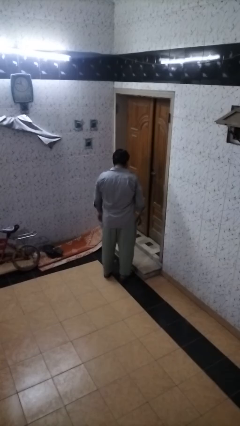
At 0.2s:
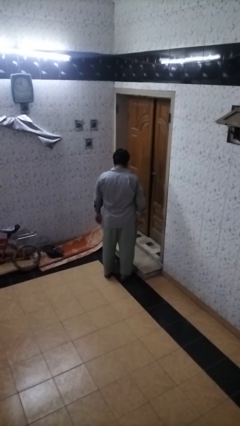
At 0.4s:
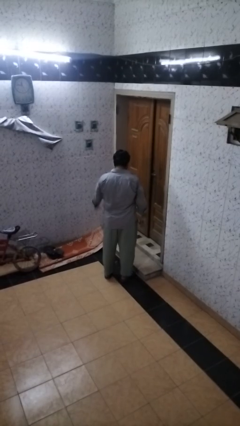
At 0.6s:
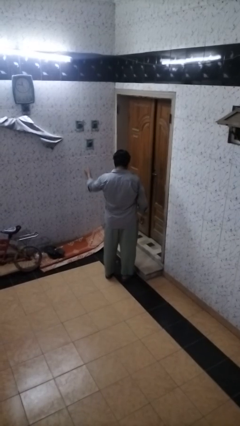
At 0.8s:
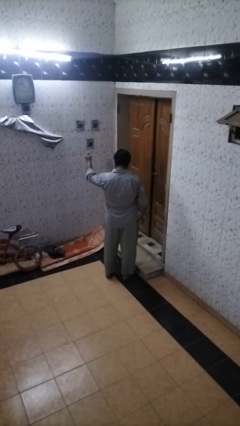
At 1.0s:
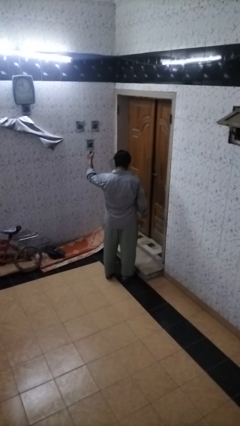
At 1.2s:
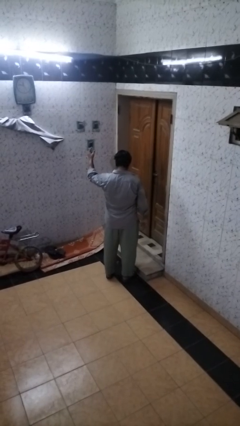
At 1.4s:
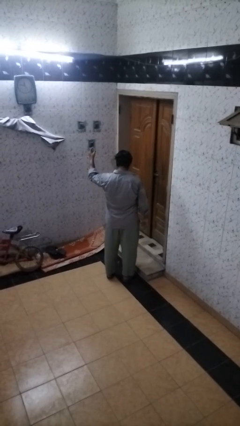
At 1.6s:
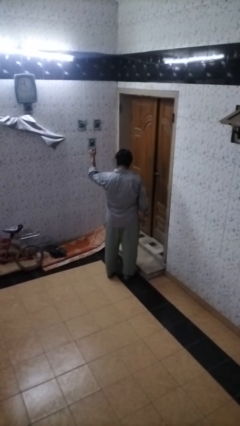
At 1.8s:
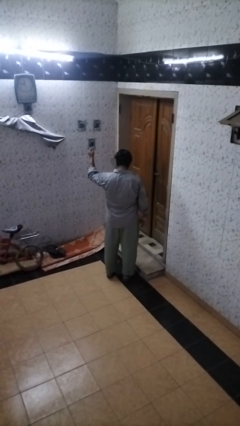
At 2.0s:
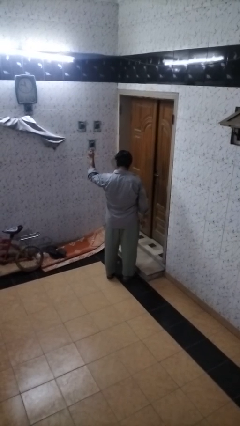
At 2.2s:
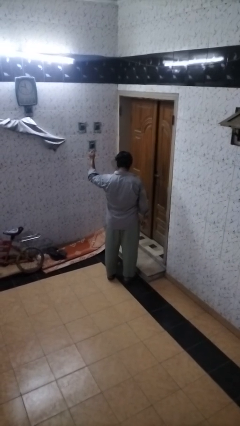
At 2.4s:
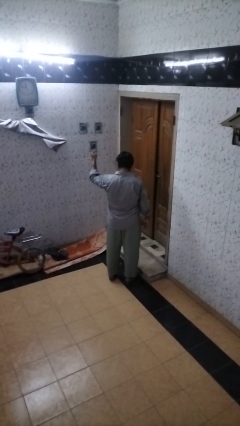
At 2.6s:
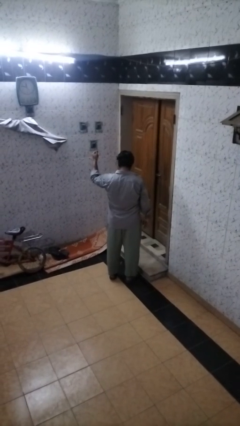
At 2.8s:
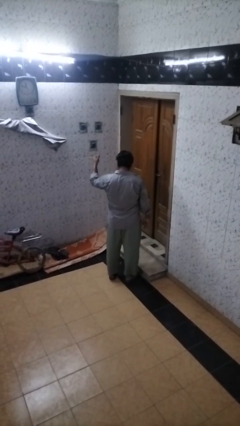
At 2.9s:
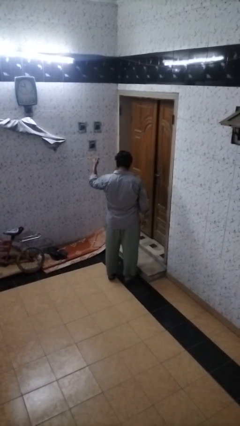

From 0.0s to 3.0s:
person snaps fingers

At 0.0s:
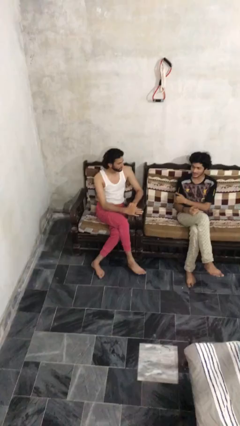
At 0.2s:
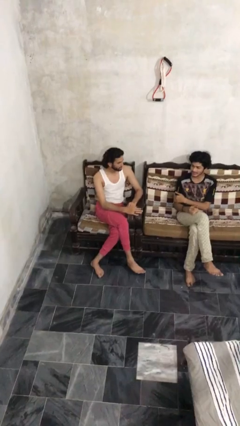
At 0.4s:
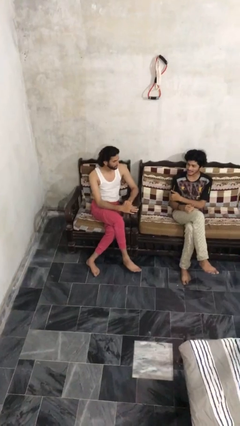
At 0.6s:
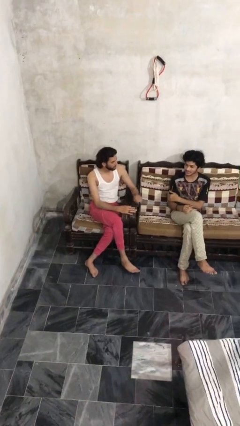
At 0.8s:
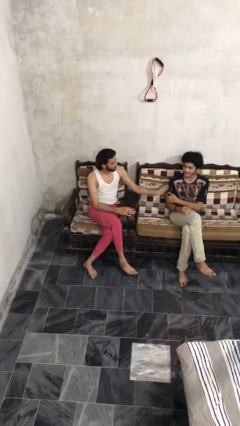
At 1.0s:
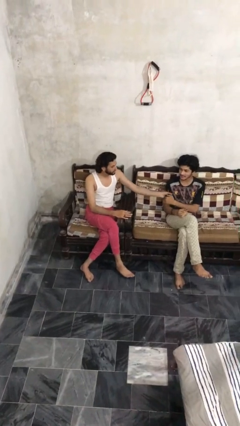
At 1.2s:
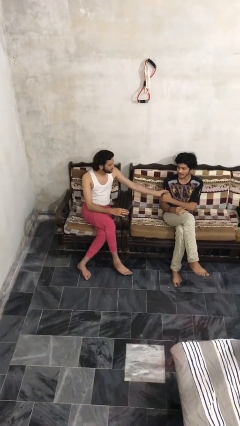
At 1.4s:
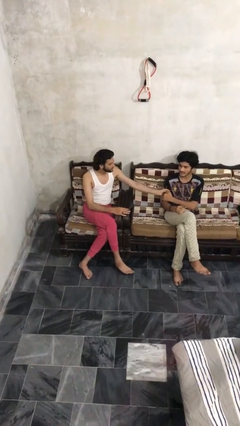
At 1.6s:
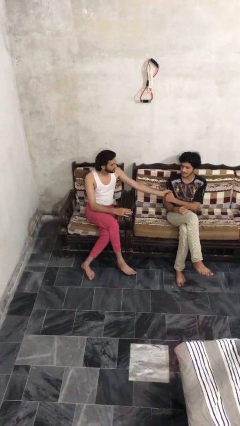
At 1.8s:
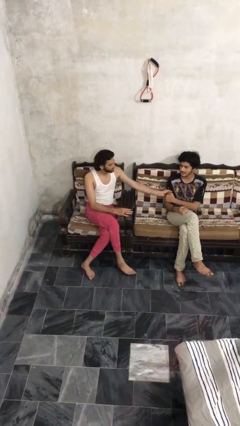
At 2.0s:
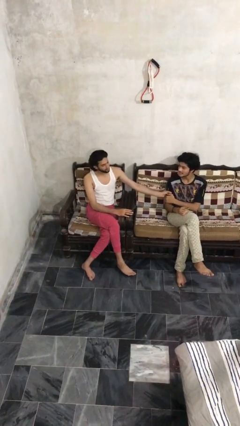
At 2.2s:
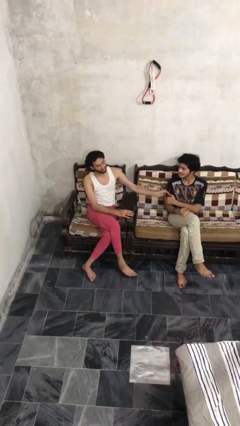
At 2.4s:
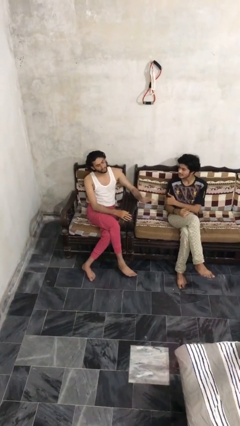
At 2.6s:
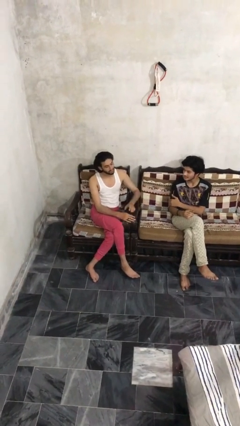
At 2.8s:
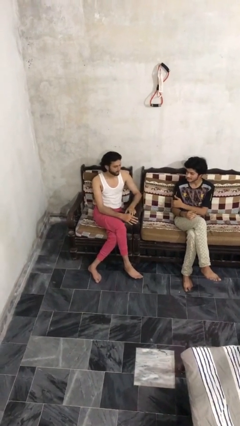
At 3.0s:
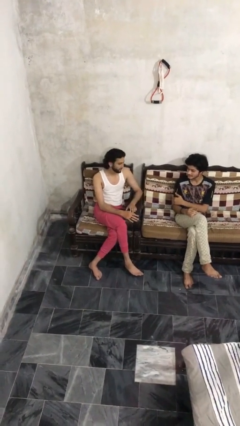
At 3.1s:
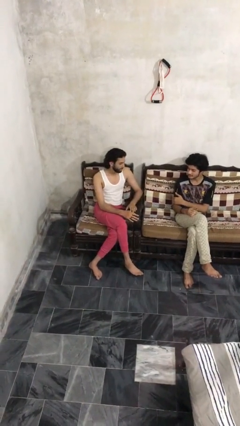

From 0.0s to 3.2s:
person grabs person by bicep

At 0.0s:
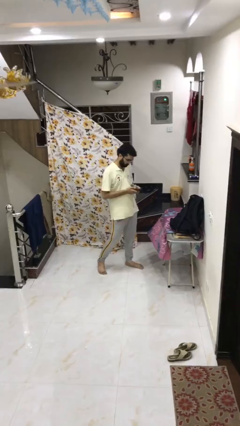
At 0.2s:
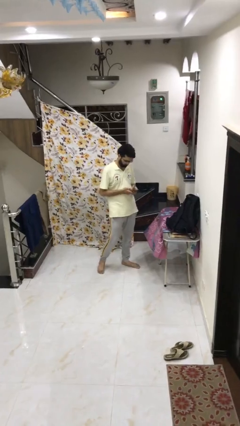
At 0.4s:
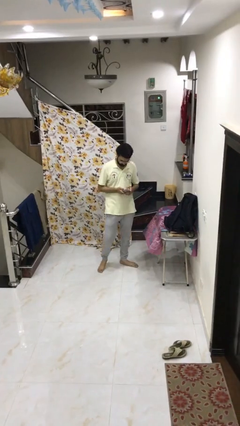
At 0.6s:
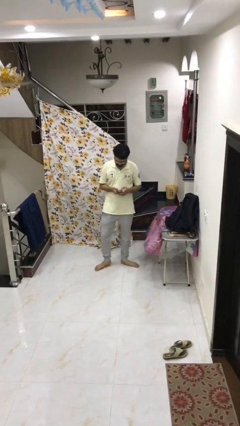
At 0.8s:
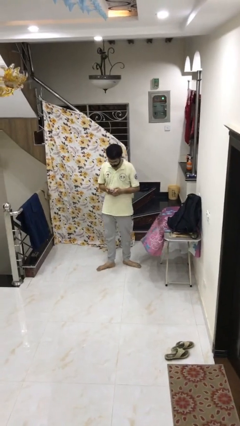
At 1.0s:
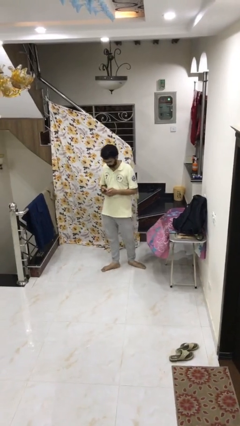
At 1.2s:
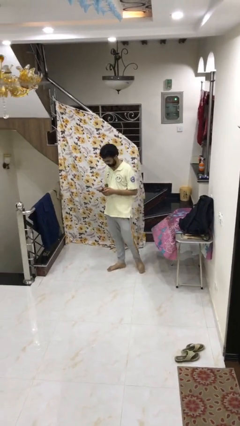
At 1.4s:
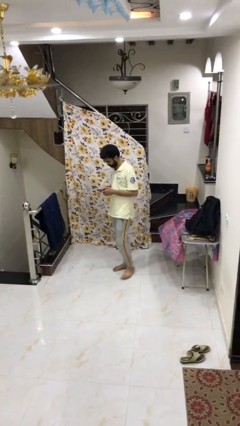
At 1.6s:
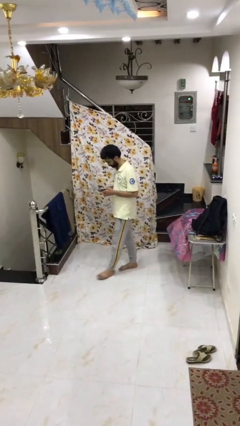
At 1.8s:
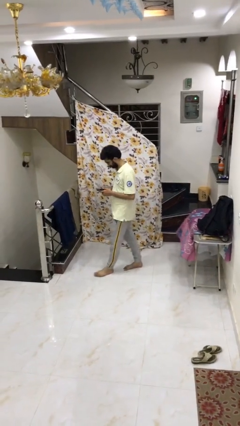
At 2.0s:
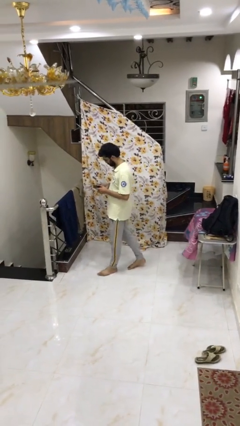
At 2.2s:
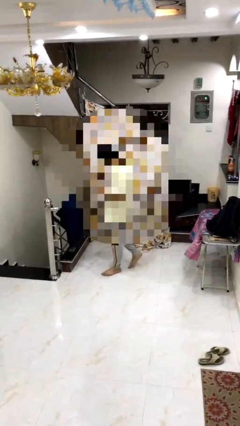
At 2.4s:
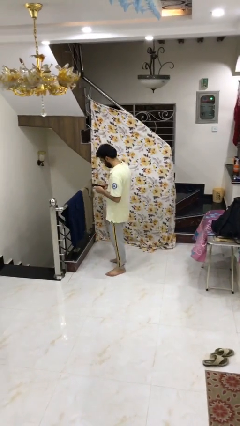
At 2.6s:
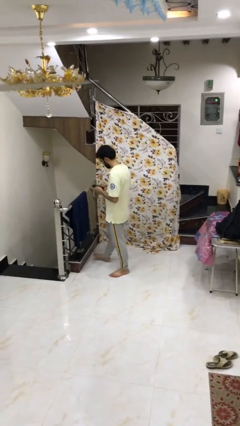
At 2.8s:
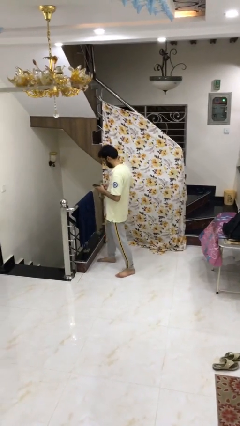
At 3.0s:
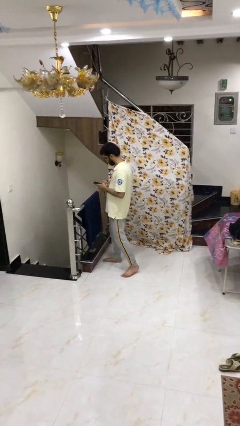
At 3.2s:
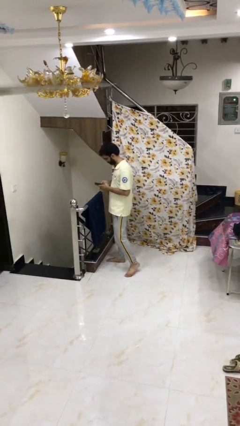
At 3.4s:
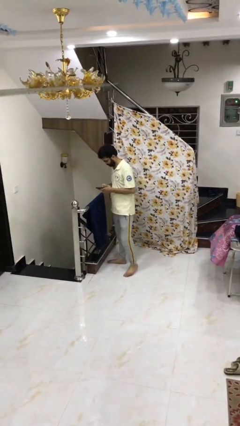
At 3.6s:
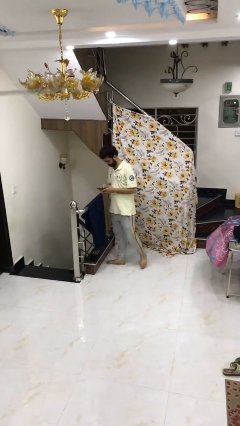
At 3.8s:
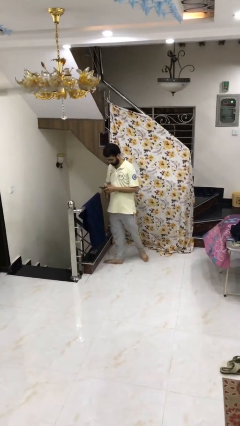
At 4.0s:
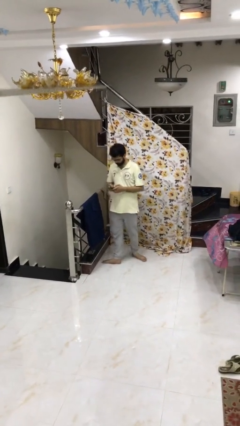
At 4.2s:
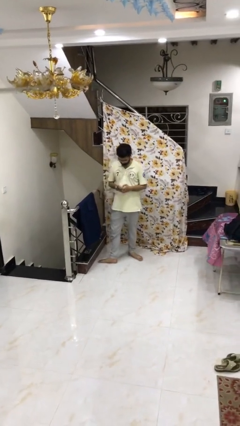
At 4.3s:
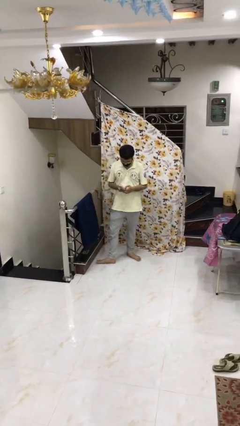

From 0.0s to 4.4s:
person texts on phone

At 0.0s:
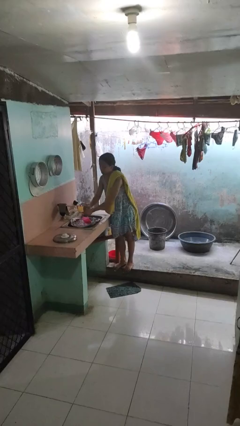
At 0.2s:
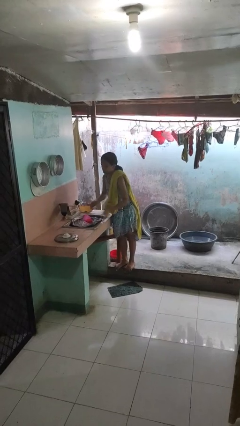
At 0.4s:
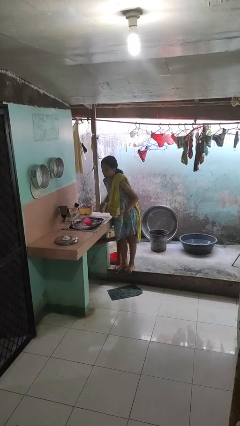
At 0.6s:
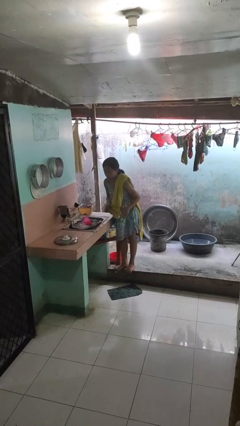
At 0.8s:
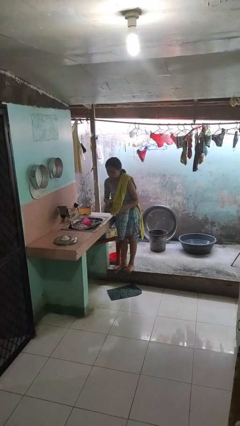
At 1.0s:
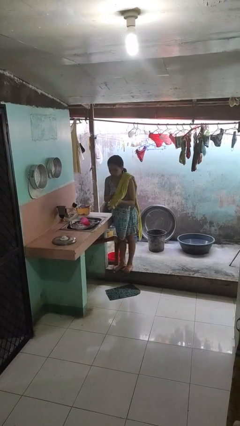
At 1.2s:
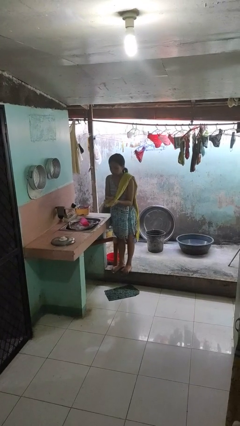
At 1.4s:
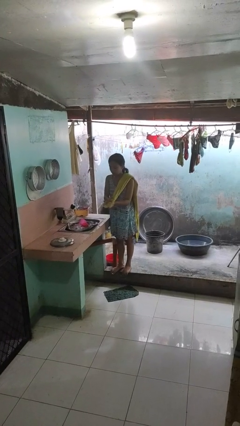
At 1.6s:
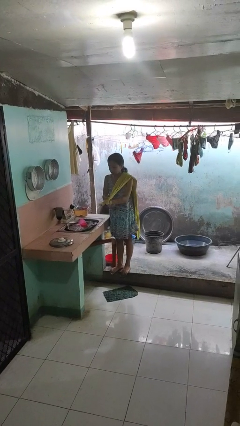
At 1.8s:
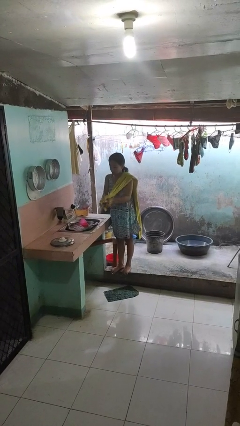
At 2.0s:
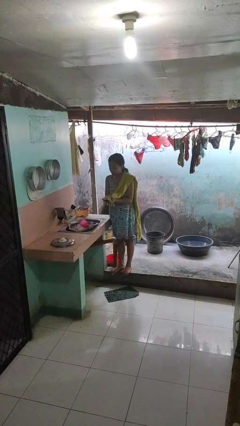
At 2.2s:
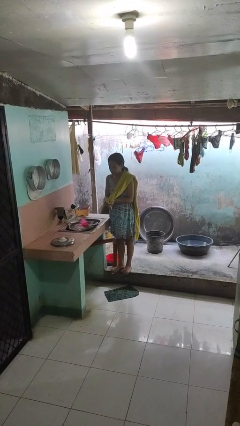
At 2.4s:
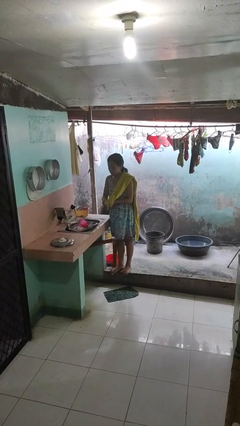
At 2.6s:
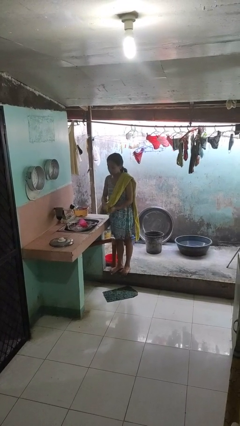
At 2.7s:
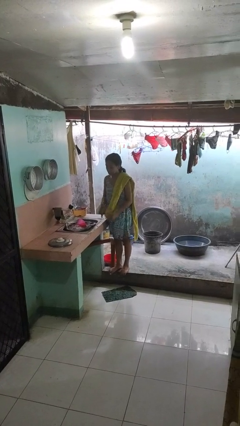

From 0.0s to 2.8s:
person dries hands with towel

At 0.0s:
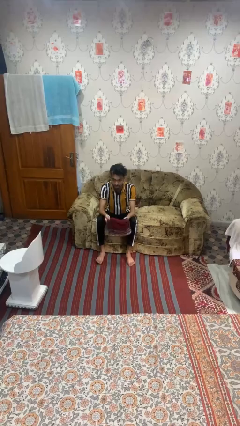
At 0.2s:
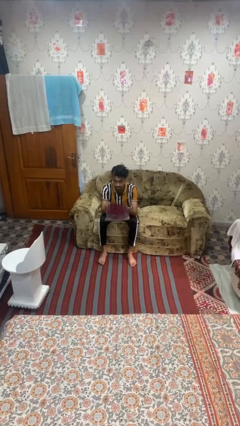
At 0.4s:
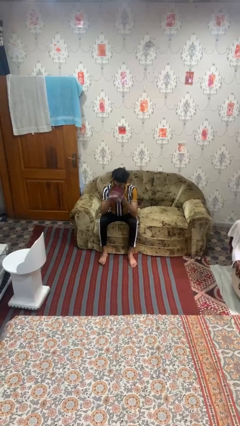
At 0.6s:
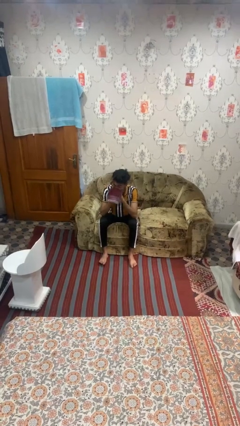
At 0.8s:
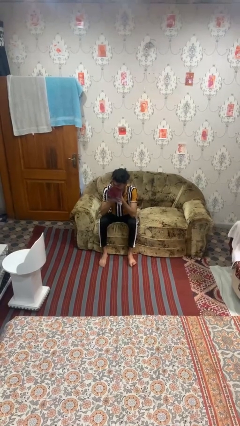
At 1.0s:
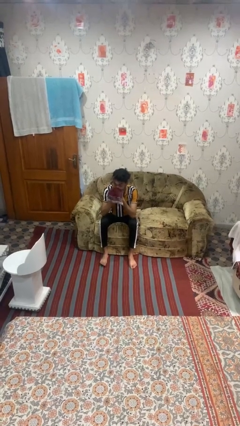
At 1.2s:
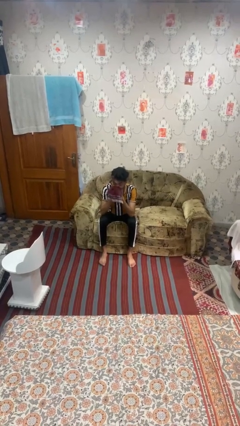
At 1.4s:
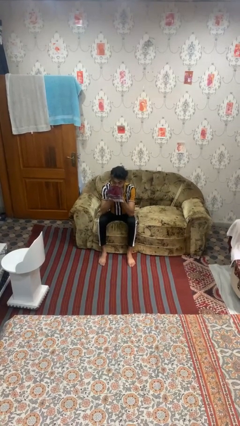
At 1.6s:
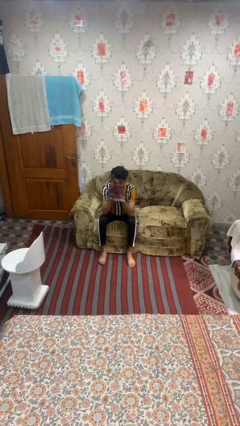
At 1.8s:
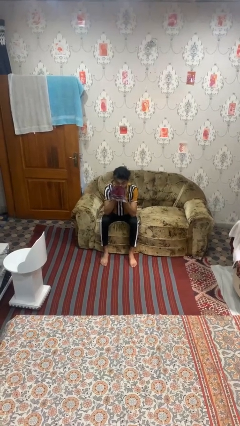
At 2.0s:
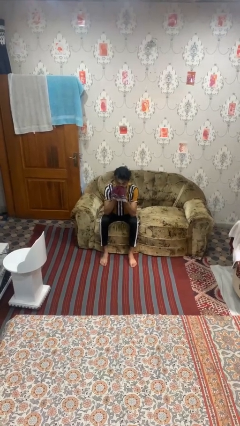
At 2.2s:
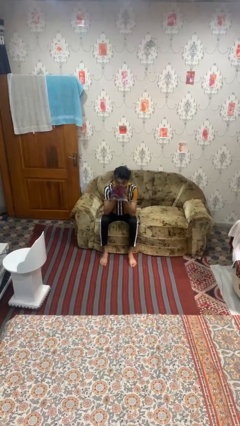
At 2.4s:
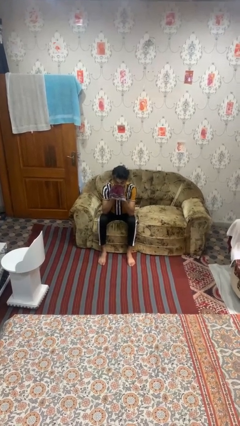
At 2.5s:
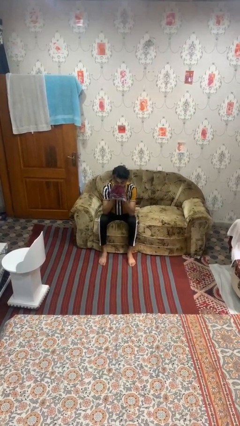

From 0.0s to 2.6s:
person blows nose

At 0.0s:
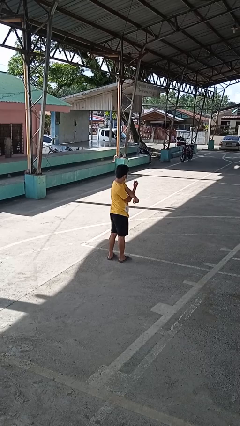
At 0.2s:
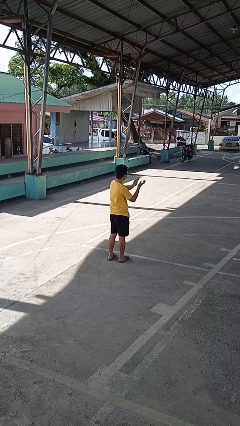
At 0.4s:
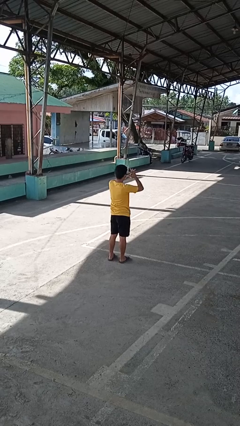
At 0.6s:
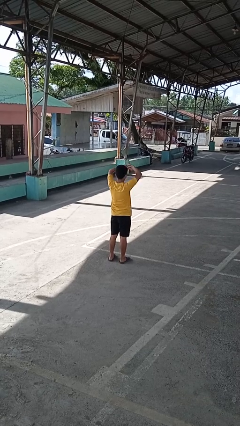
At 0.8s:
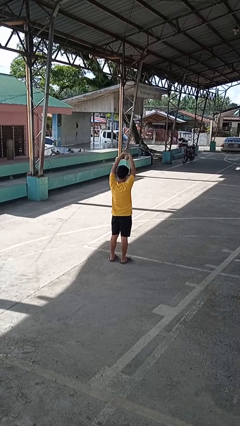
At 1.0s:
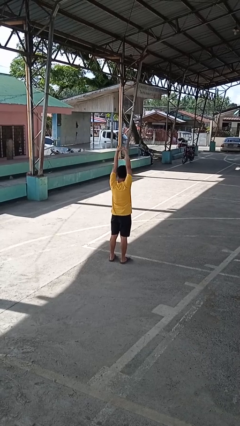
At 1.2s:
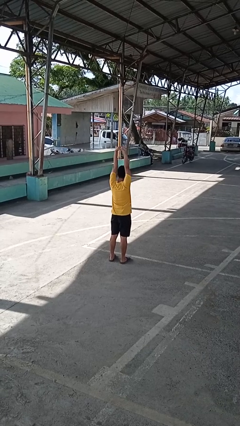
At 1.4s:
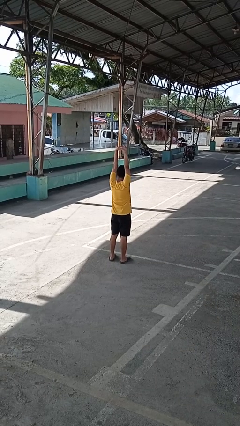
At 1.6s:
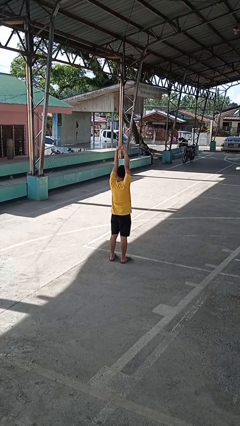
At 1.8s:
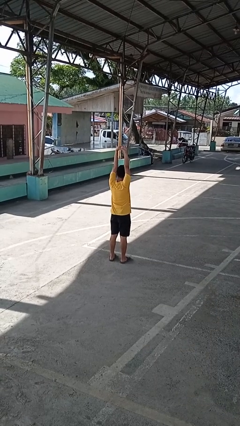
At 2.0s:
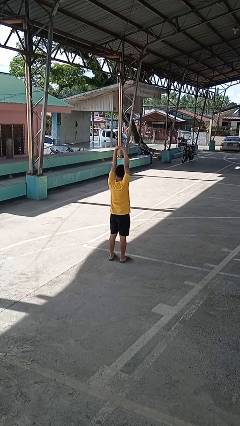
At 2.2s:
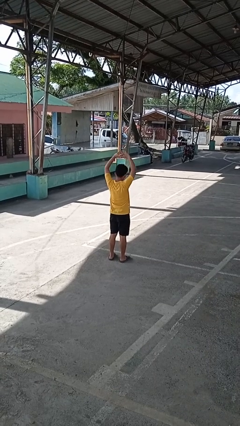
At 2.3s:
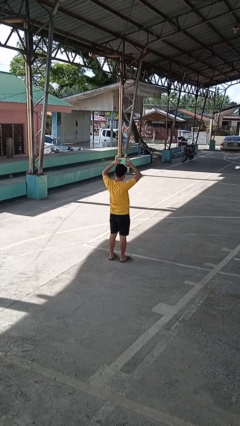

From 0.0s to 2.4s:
person stretches arms over head
